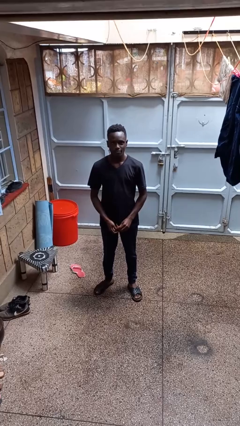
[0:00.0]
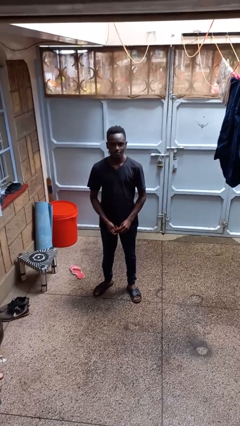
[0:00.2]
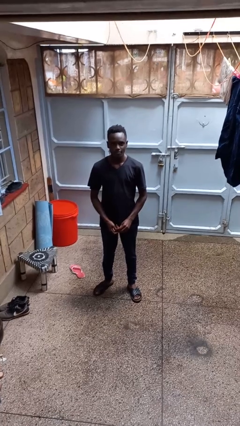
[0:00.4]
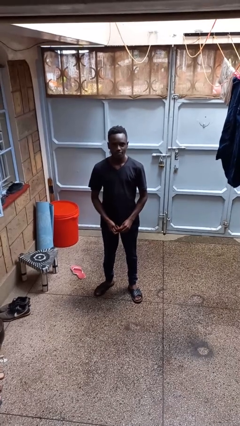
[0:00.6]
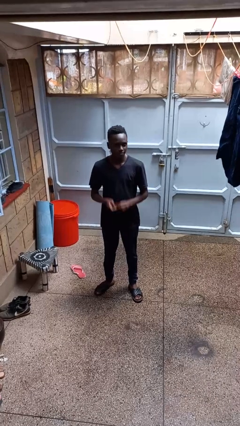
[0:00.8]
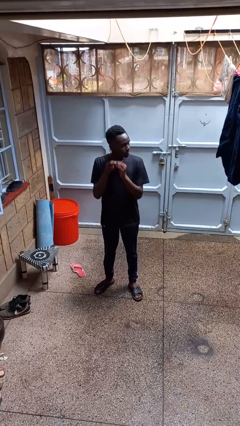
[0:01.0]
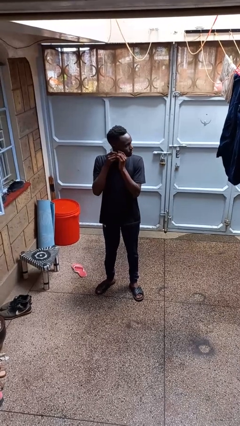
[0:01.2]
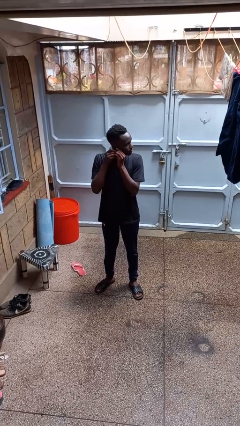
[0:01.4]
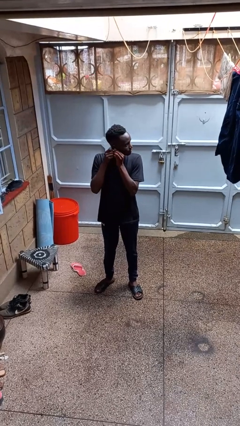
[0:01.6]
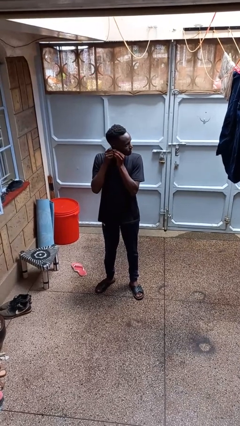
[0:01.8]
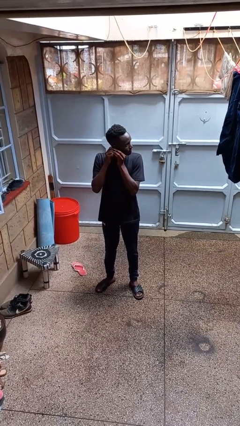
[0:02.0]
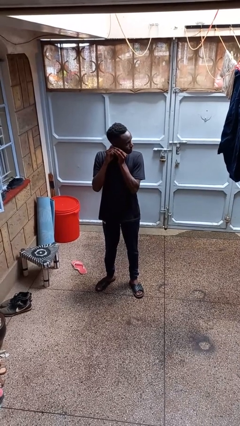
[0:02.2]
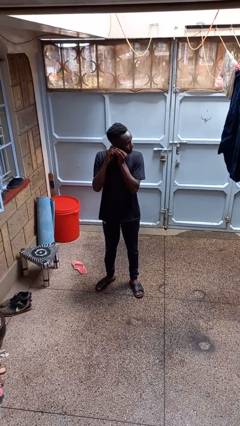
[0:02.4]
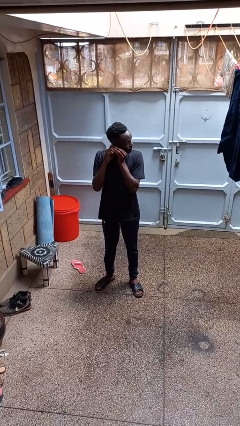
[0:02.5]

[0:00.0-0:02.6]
person puts on earrings

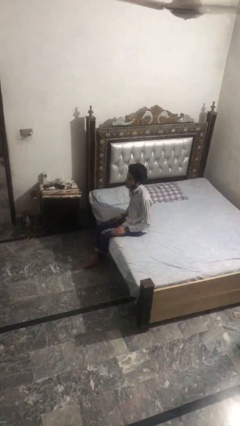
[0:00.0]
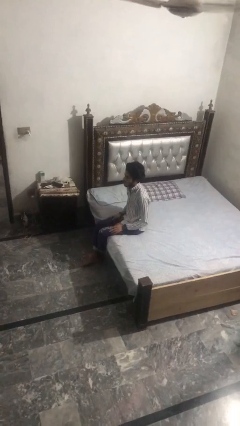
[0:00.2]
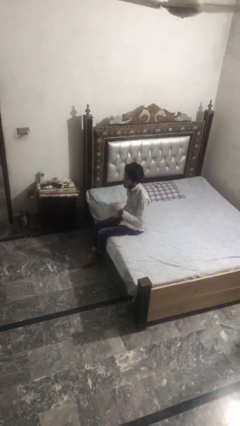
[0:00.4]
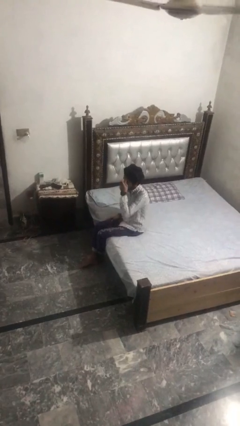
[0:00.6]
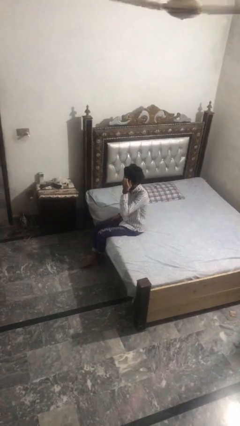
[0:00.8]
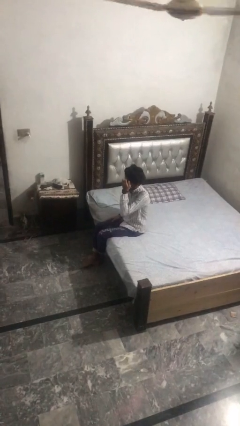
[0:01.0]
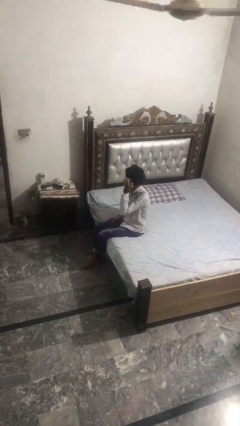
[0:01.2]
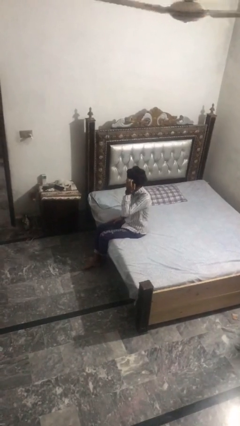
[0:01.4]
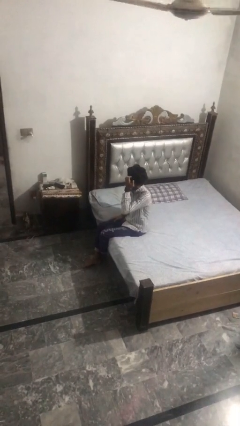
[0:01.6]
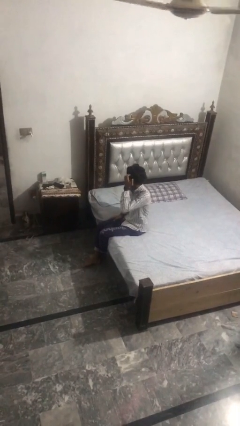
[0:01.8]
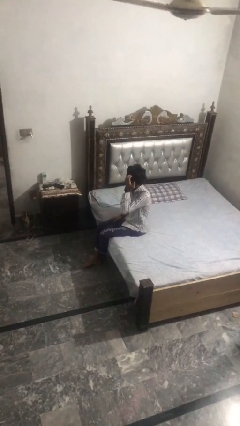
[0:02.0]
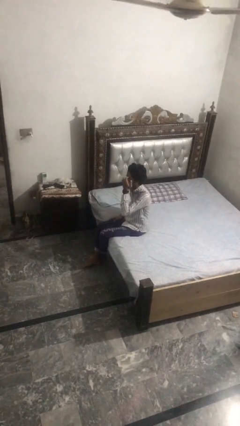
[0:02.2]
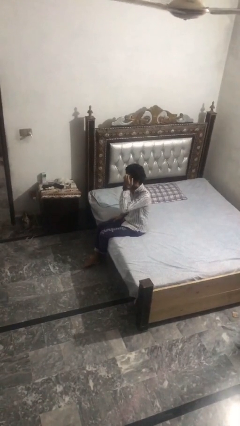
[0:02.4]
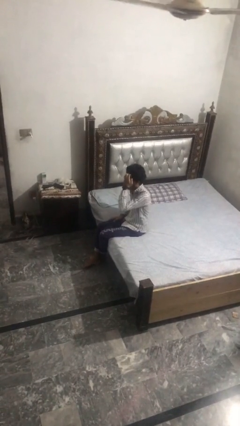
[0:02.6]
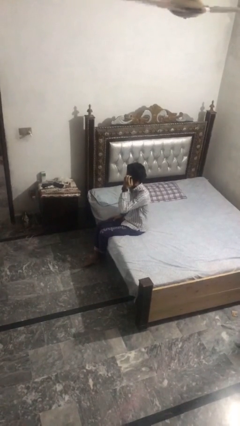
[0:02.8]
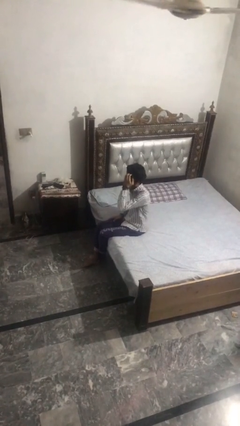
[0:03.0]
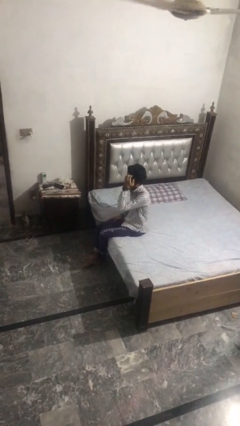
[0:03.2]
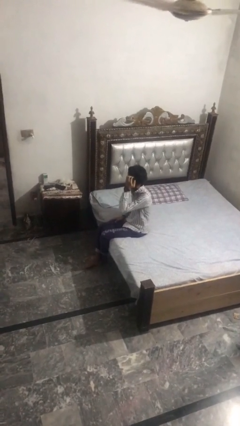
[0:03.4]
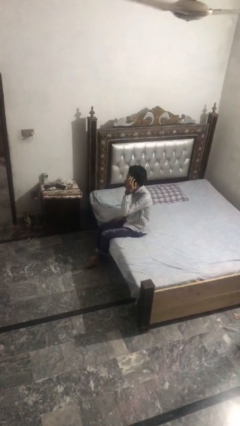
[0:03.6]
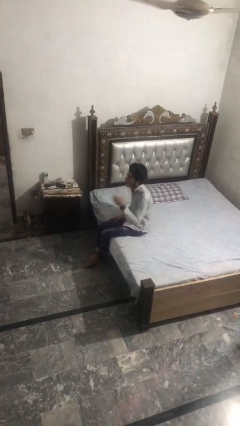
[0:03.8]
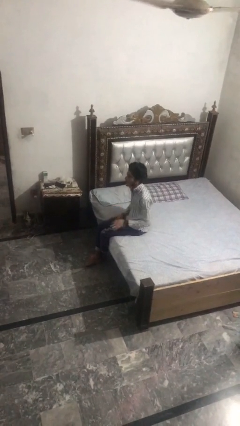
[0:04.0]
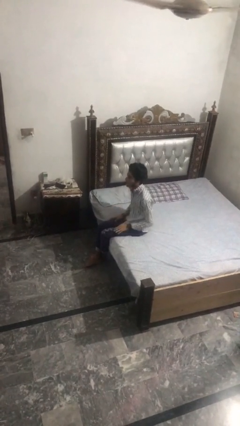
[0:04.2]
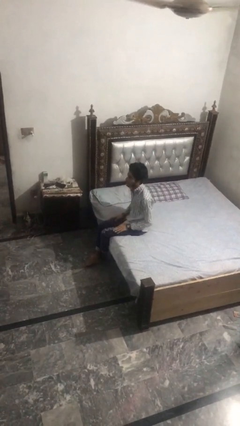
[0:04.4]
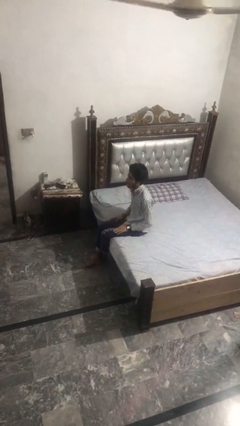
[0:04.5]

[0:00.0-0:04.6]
person scratches face

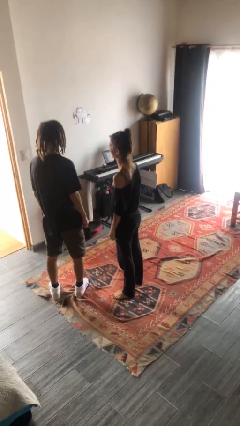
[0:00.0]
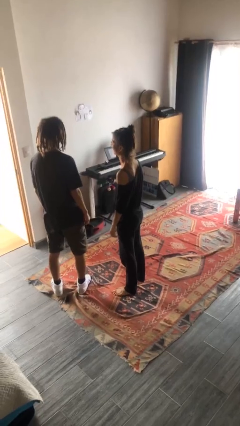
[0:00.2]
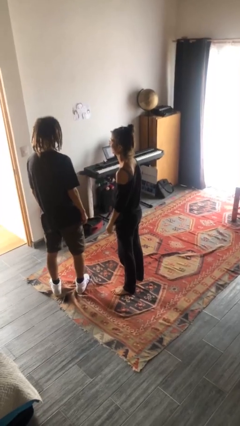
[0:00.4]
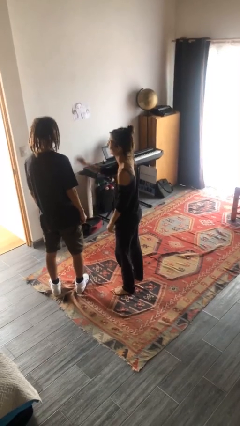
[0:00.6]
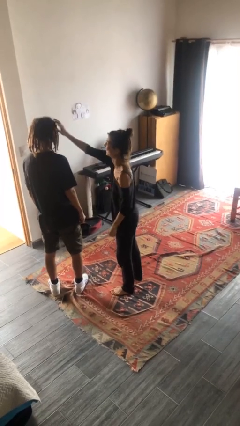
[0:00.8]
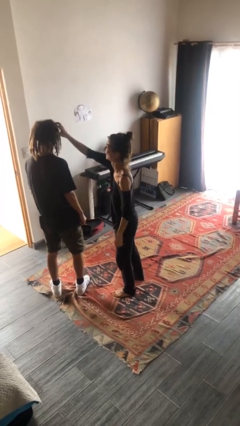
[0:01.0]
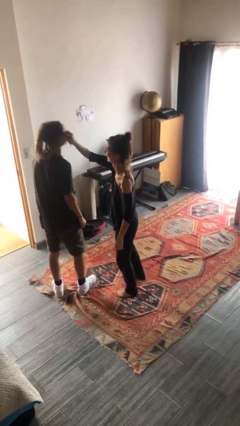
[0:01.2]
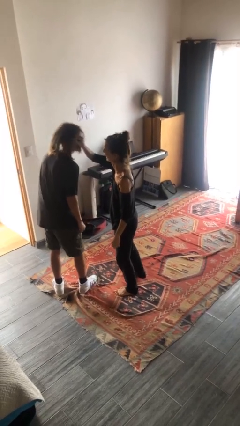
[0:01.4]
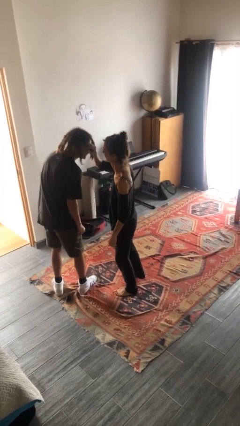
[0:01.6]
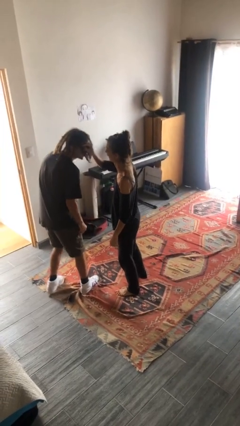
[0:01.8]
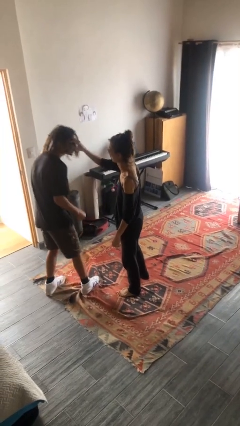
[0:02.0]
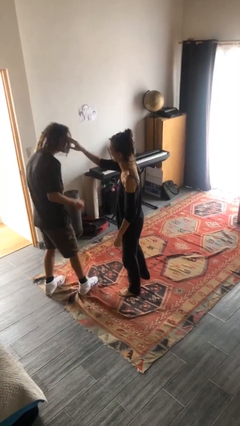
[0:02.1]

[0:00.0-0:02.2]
person grabs person by hair

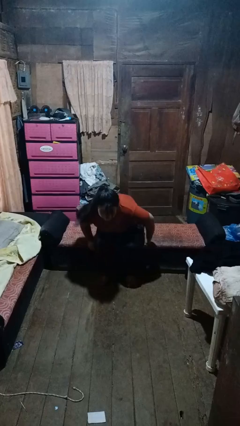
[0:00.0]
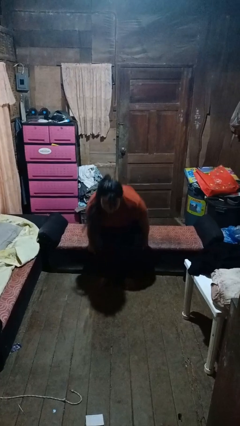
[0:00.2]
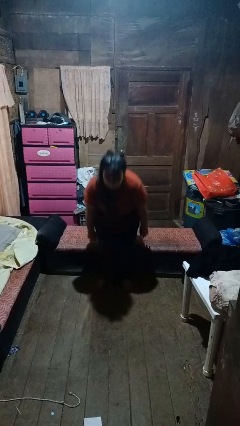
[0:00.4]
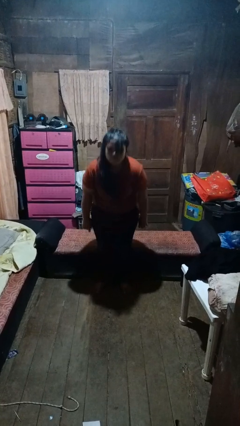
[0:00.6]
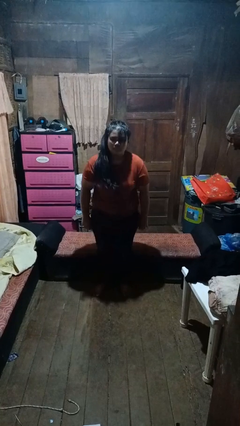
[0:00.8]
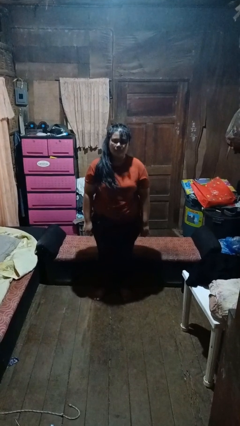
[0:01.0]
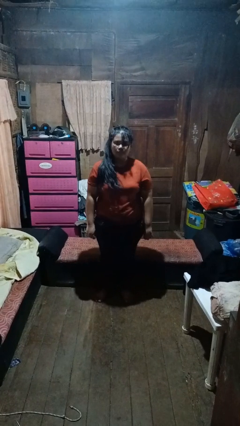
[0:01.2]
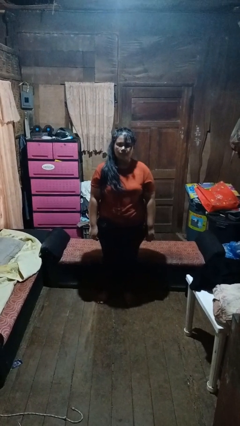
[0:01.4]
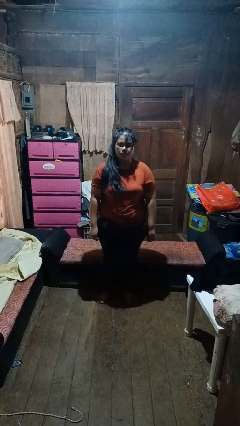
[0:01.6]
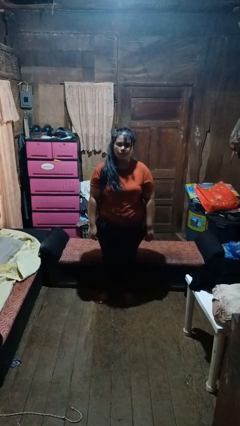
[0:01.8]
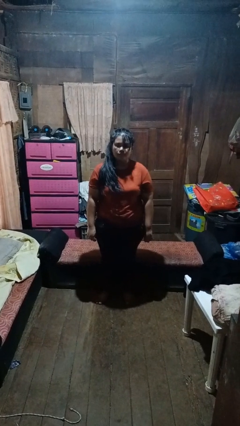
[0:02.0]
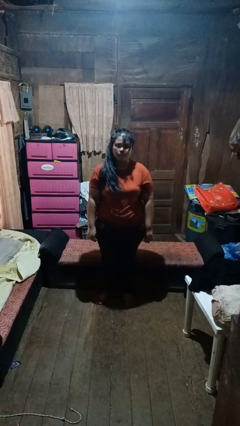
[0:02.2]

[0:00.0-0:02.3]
person stands up

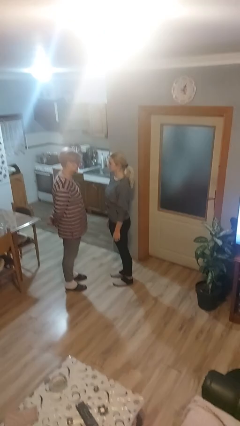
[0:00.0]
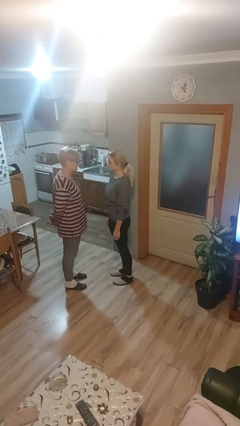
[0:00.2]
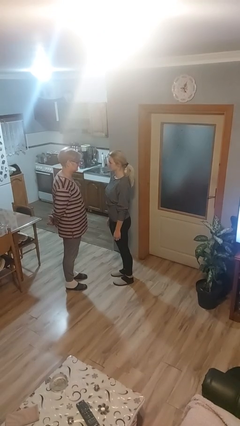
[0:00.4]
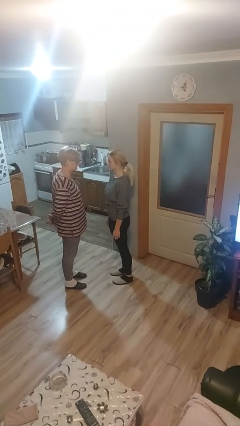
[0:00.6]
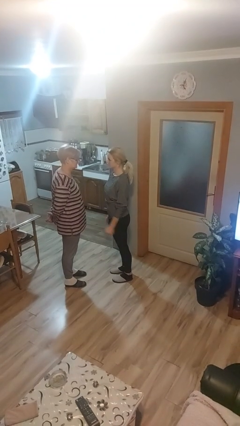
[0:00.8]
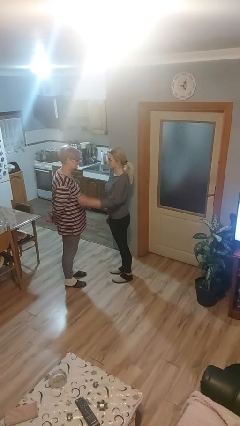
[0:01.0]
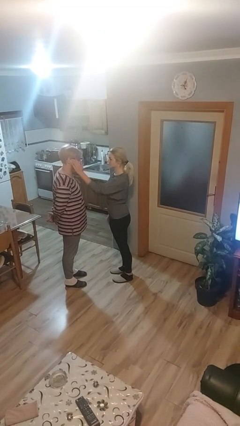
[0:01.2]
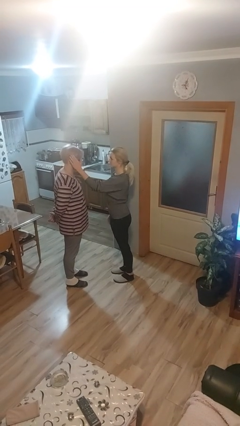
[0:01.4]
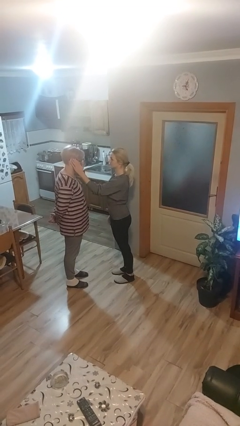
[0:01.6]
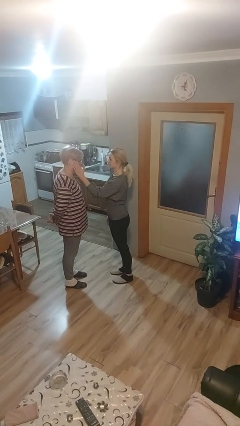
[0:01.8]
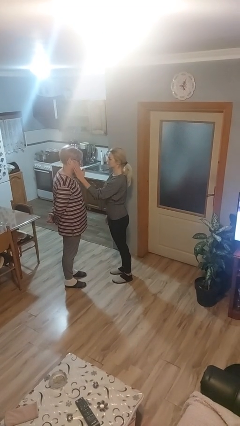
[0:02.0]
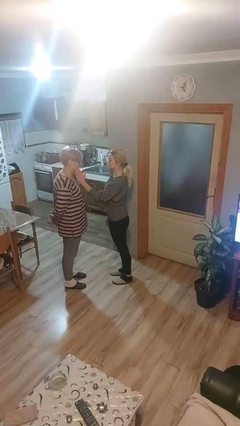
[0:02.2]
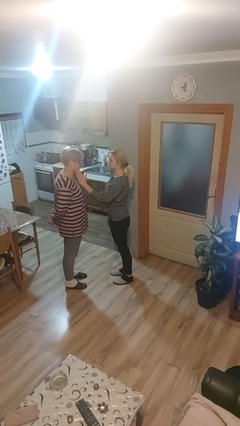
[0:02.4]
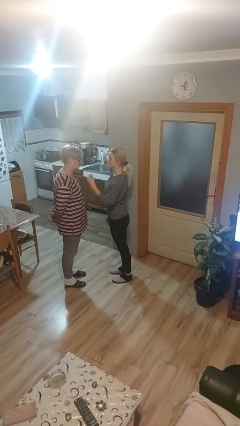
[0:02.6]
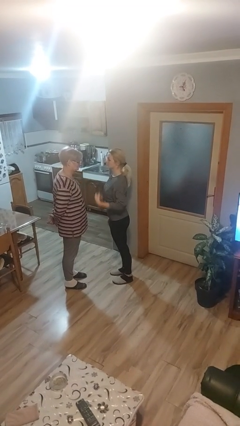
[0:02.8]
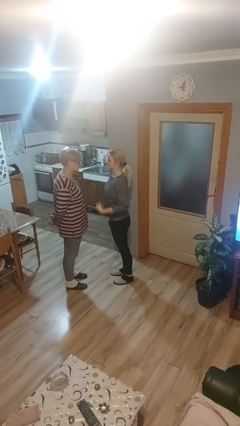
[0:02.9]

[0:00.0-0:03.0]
person touches face of person

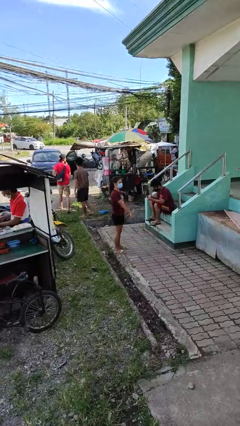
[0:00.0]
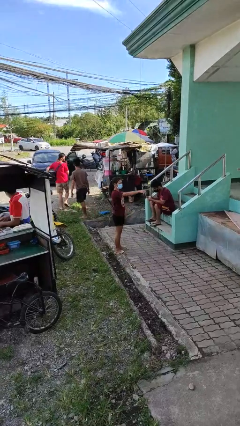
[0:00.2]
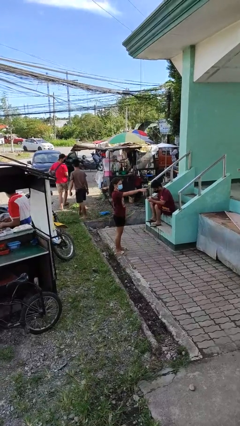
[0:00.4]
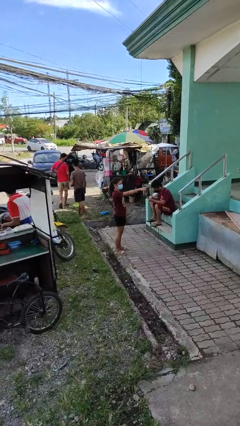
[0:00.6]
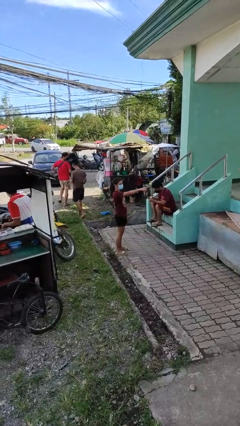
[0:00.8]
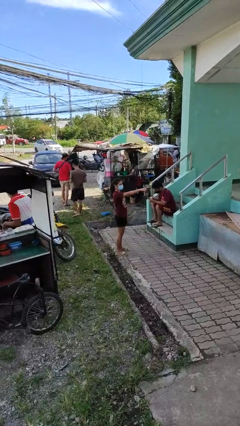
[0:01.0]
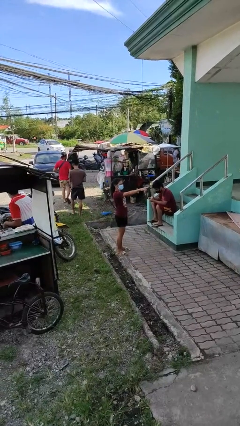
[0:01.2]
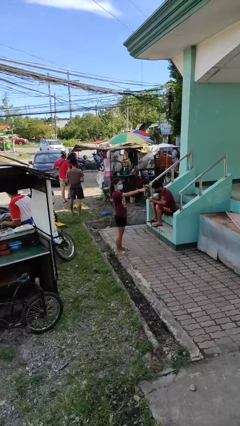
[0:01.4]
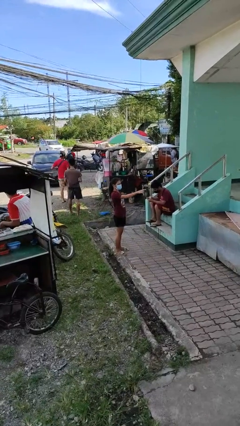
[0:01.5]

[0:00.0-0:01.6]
person points at person

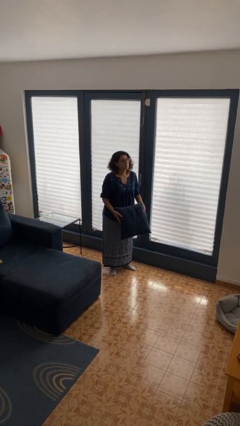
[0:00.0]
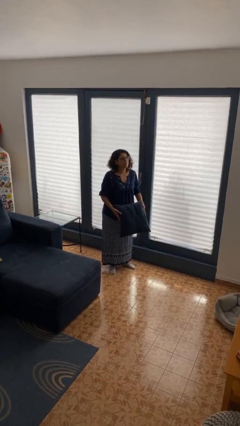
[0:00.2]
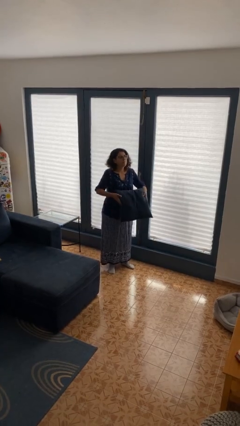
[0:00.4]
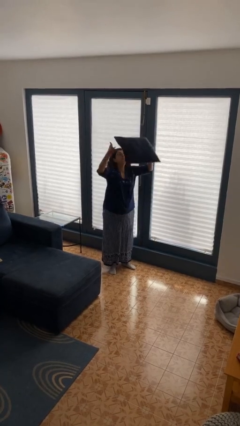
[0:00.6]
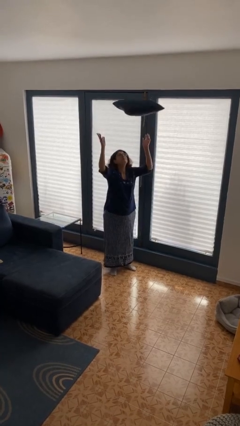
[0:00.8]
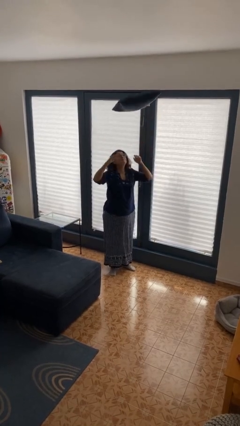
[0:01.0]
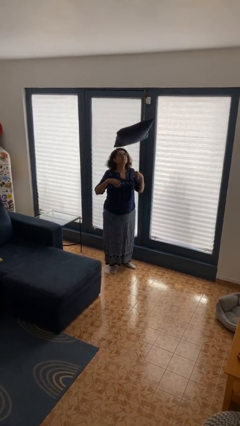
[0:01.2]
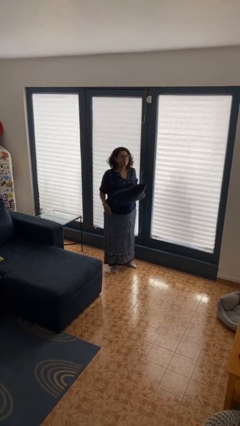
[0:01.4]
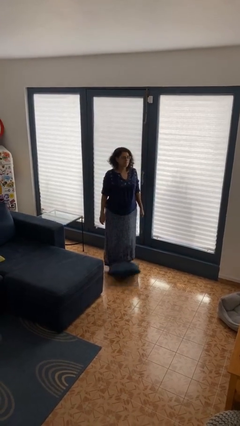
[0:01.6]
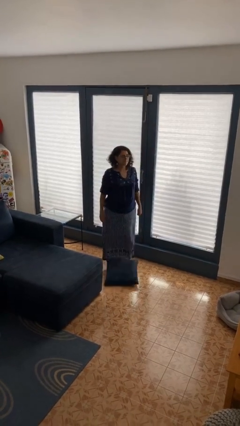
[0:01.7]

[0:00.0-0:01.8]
person throws object into air
